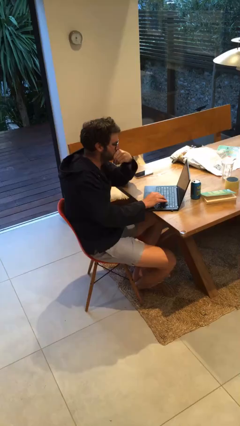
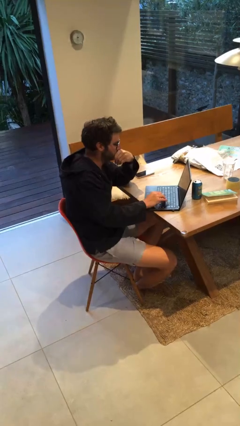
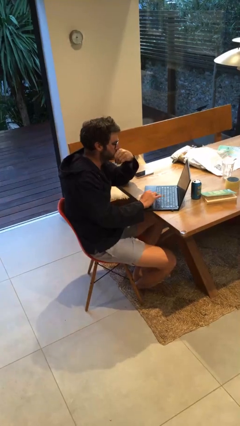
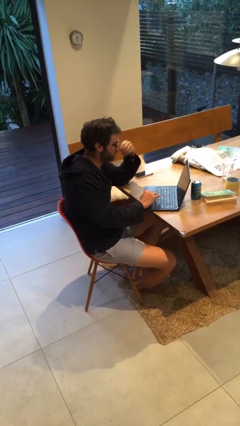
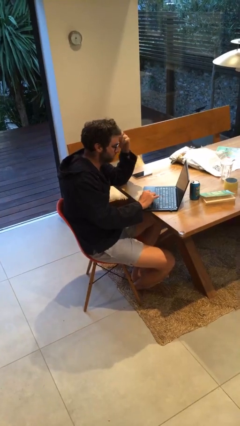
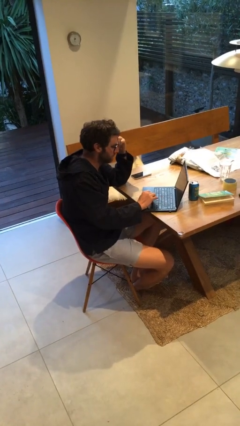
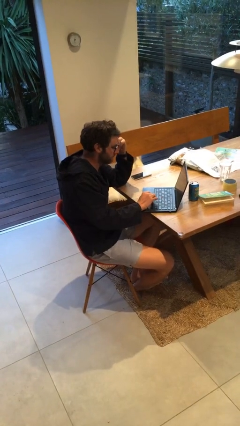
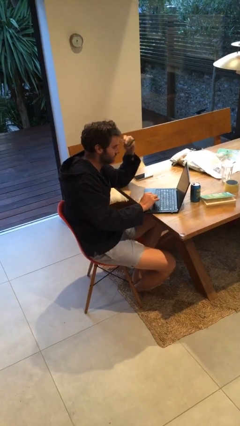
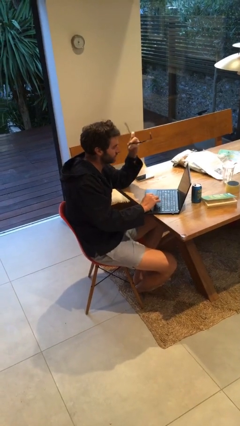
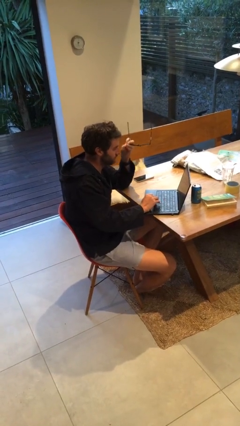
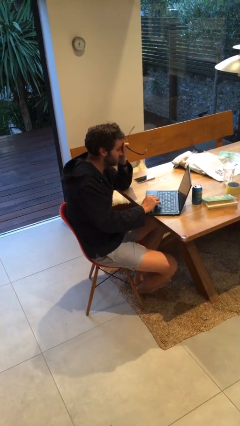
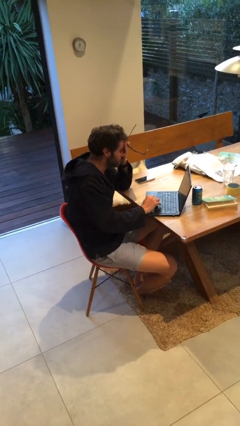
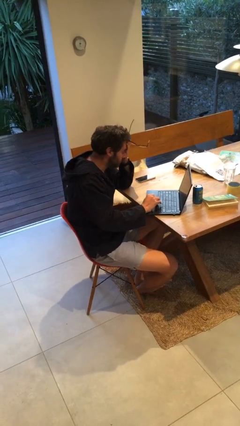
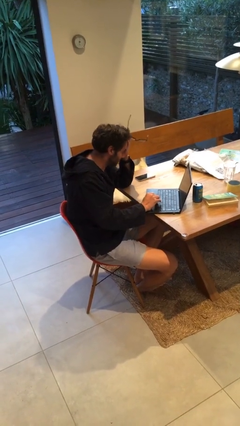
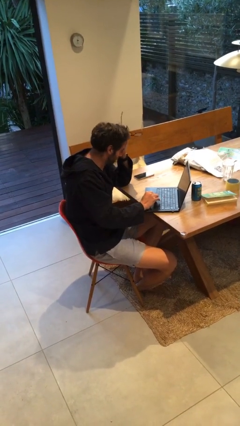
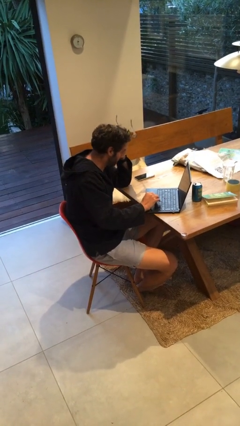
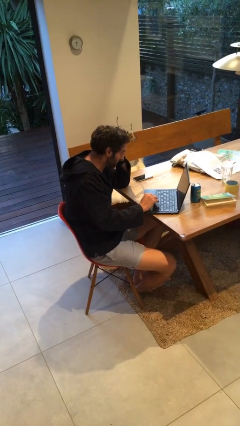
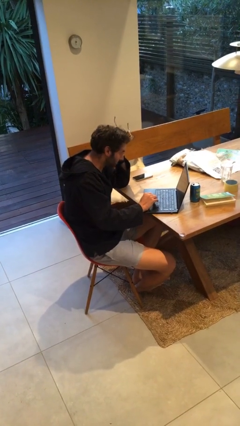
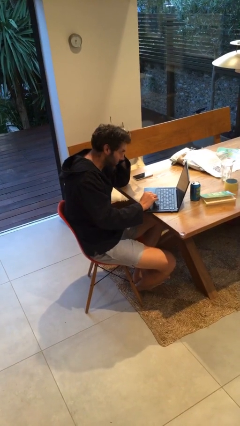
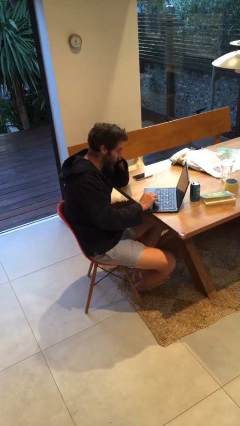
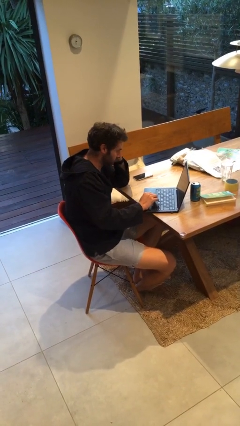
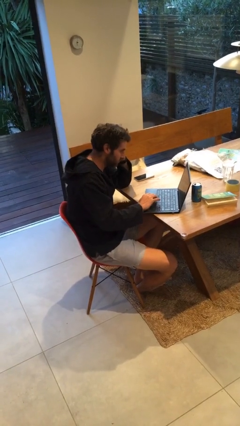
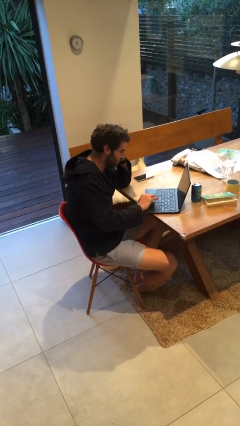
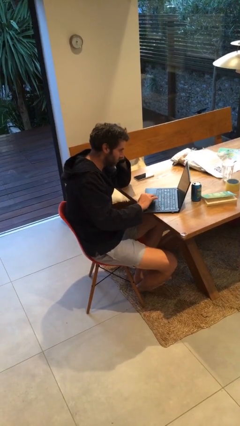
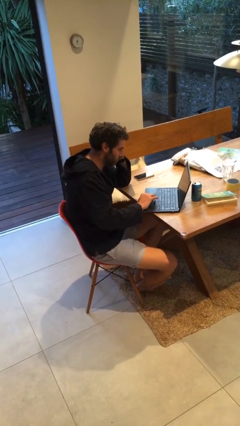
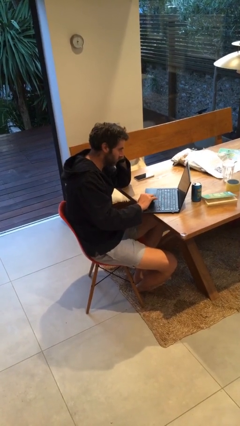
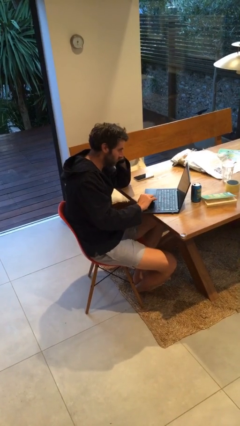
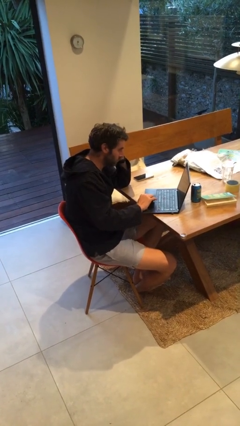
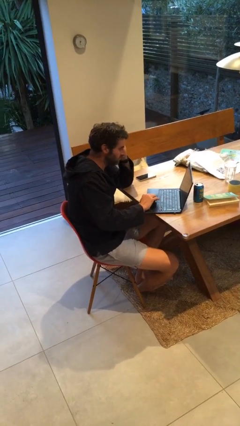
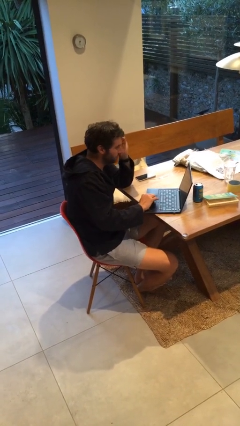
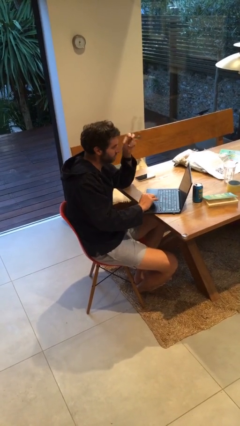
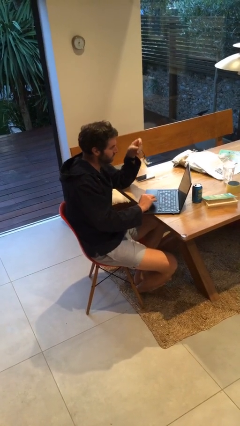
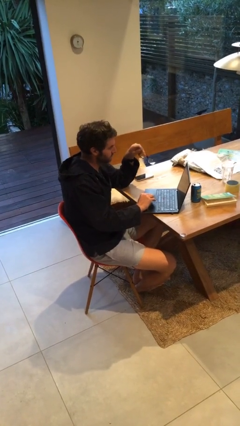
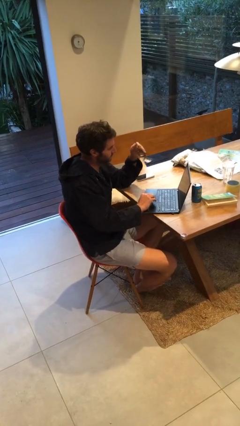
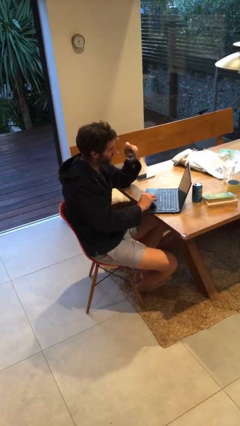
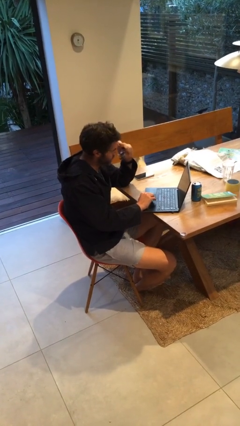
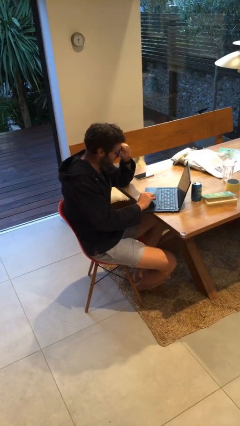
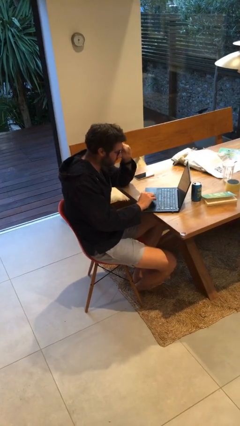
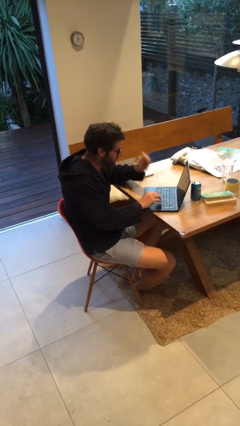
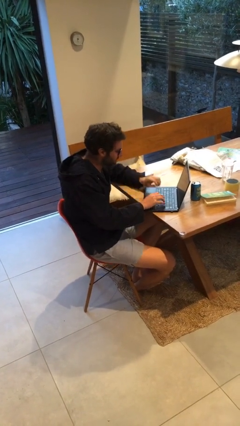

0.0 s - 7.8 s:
person interacts with laptop

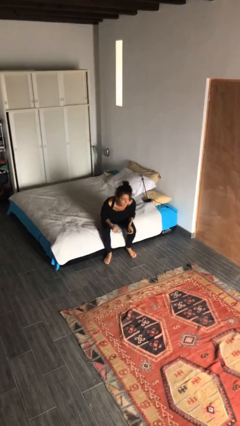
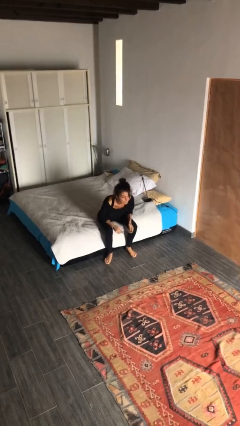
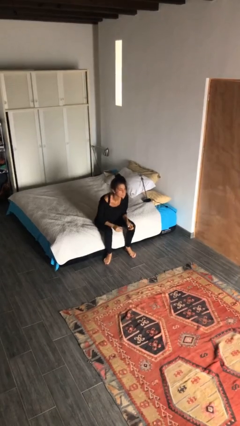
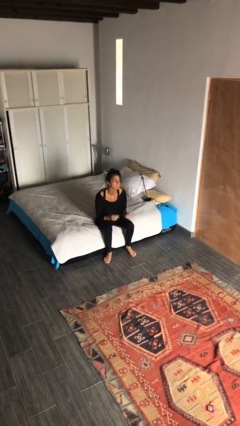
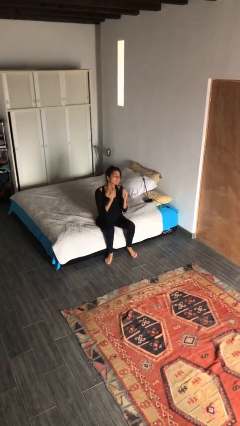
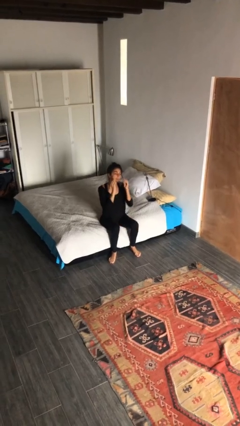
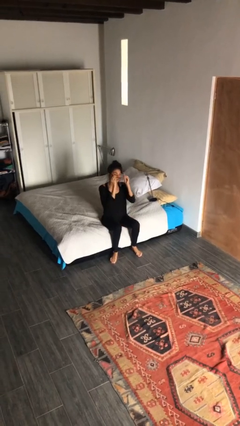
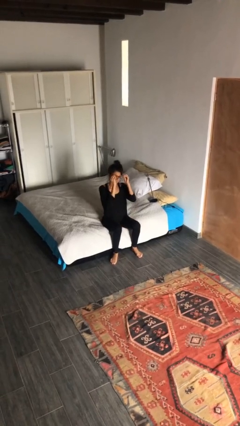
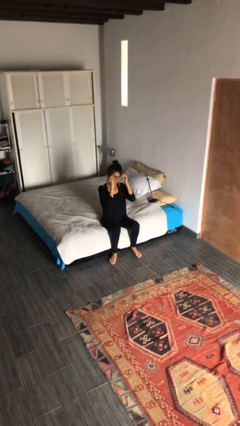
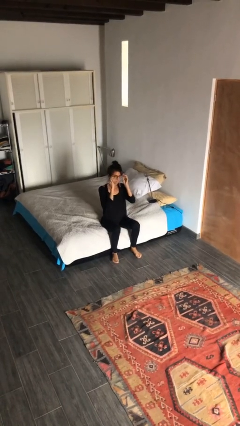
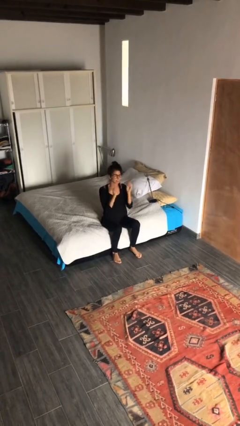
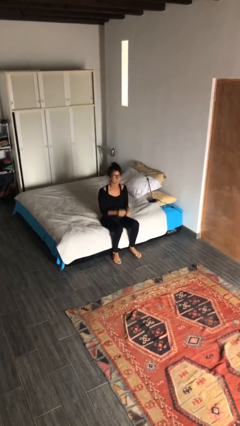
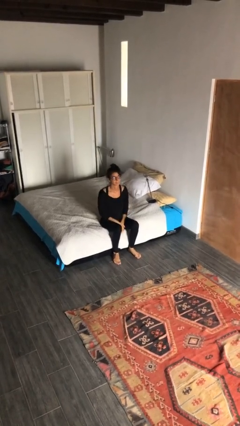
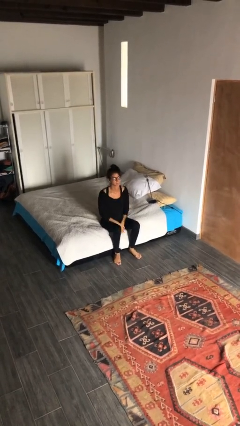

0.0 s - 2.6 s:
person puts on glasses

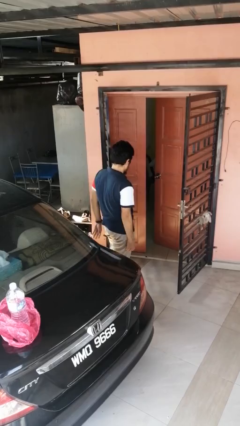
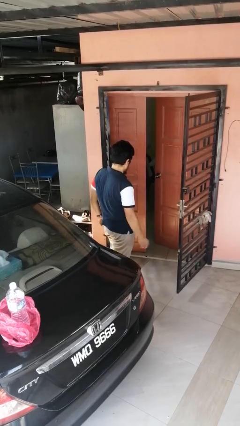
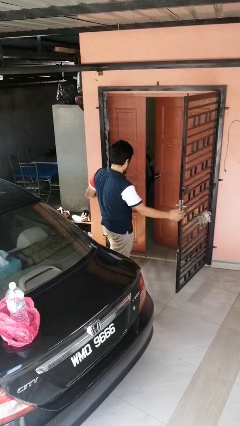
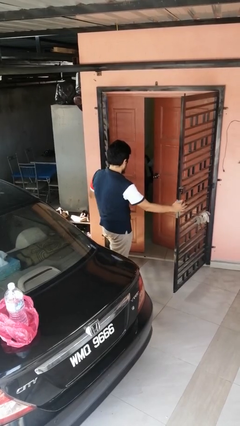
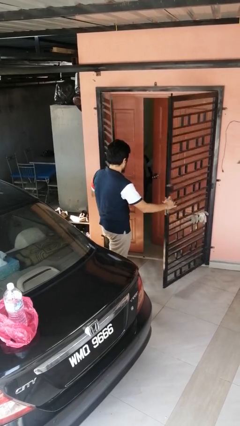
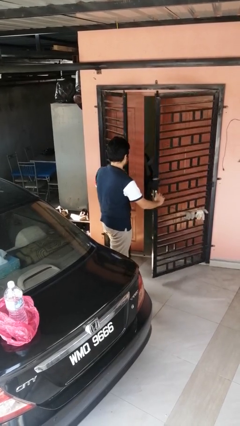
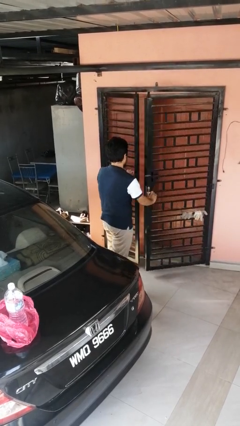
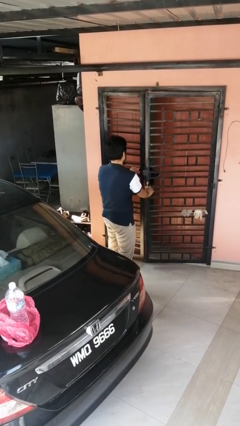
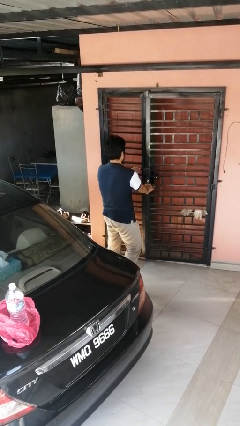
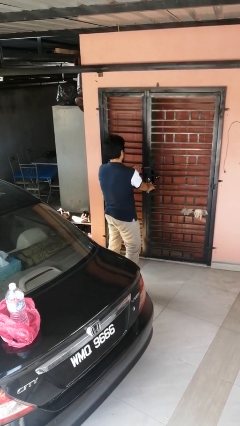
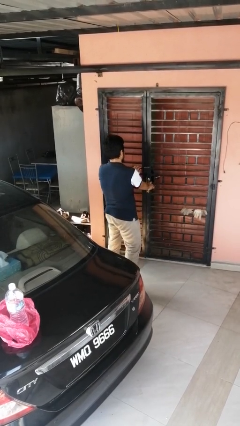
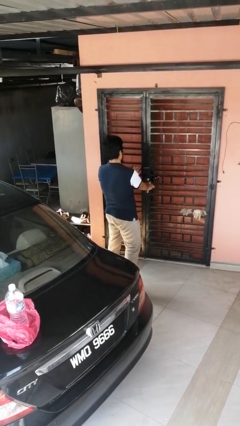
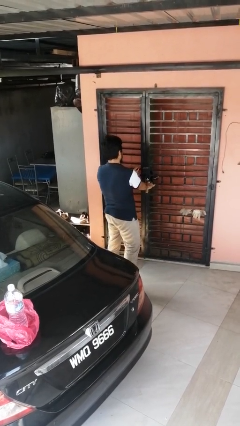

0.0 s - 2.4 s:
person closes gate

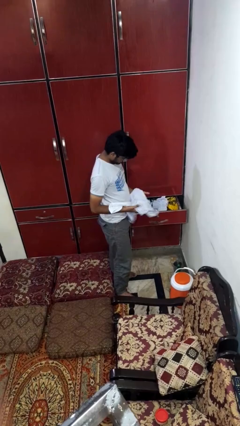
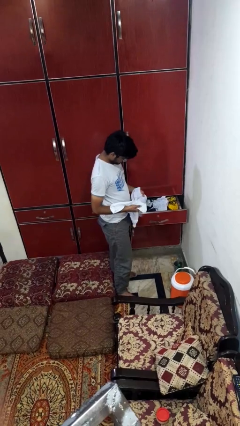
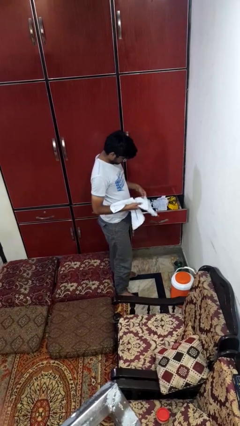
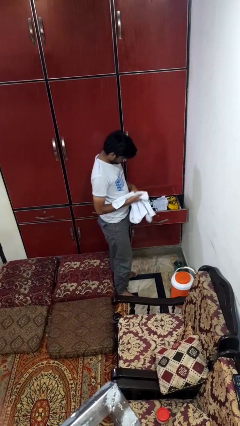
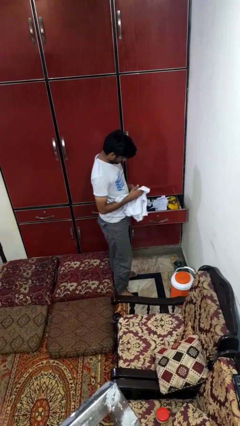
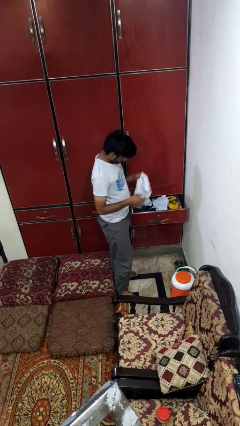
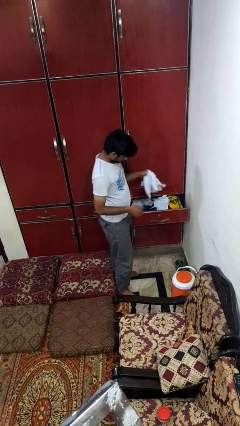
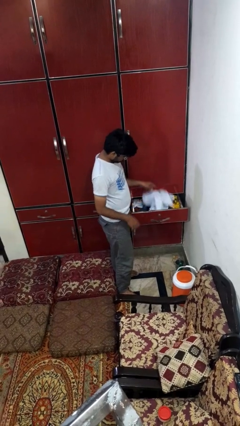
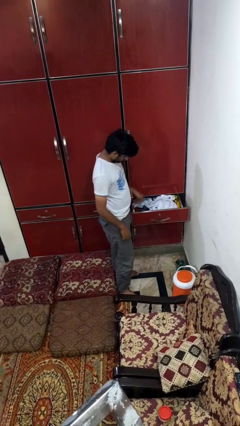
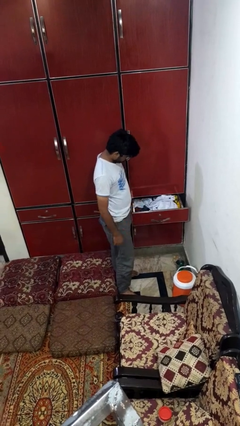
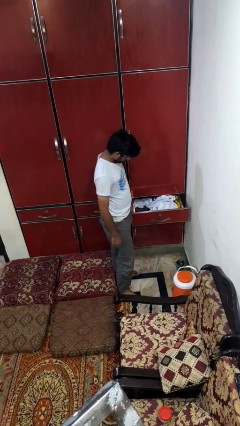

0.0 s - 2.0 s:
person puts clothes into dresser

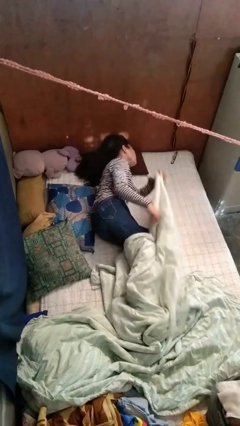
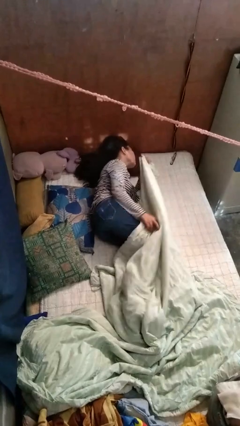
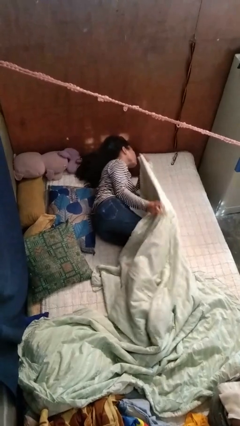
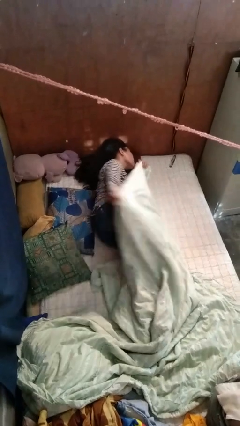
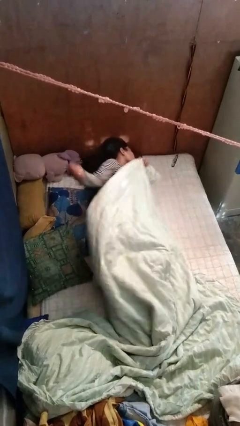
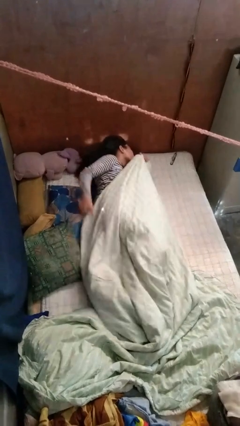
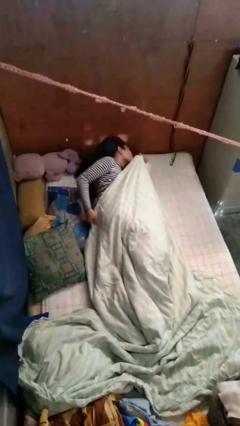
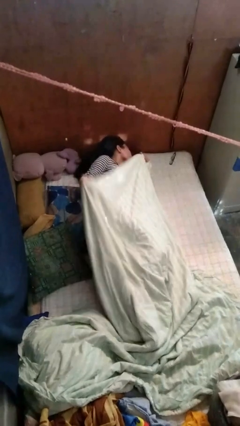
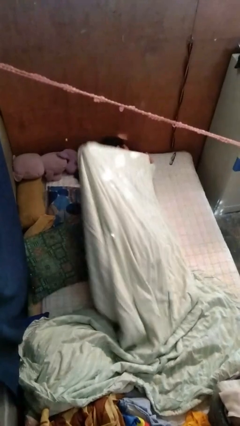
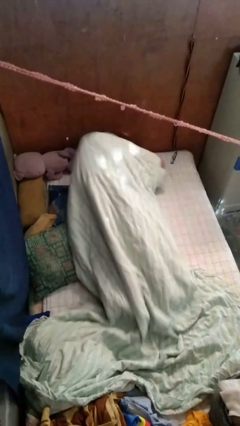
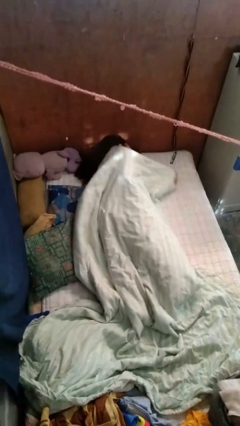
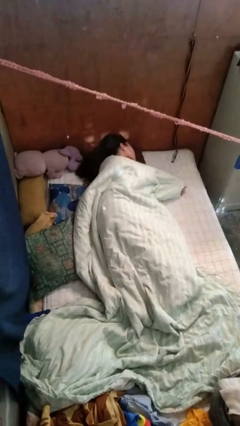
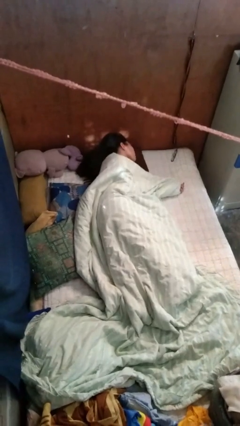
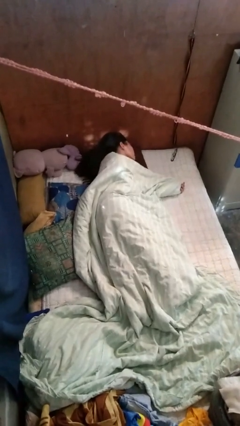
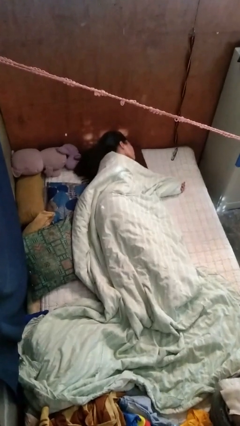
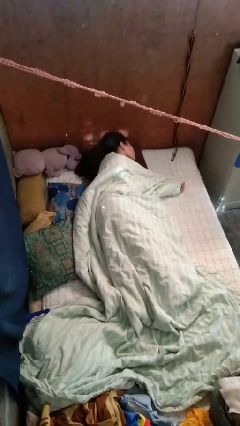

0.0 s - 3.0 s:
person covers with bedsheets
